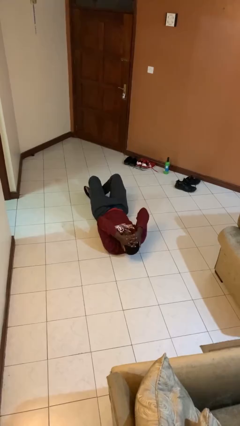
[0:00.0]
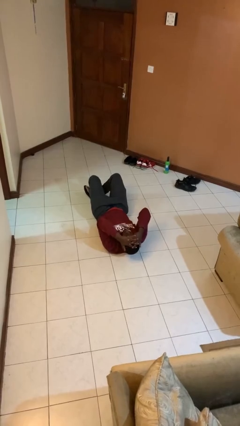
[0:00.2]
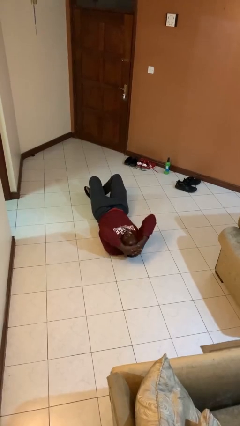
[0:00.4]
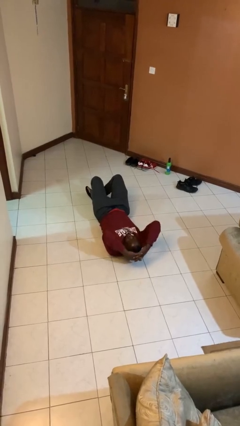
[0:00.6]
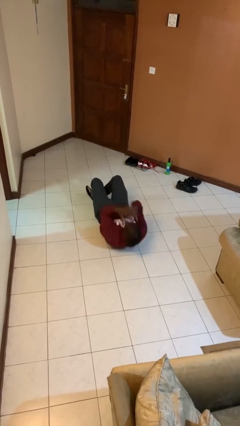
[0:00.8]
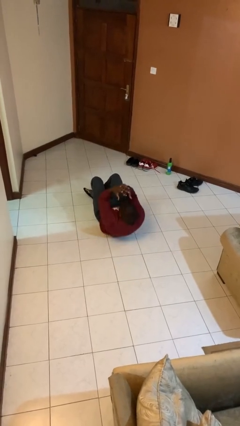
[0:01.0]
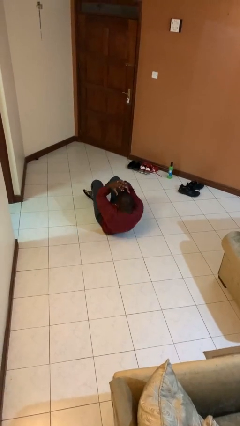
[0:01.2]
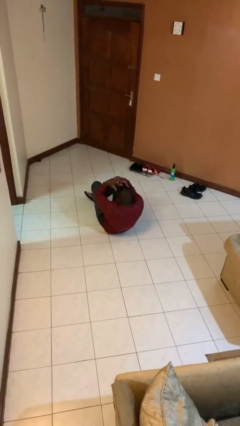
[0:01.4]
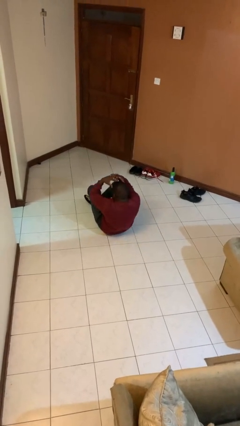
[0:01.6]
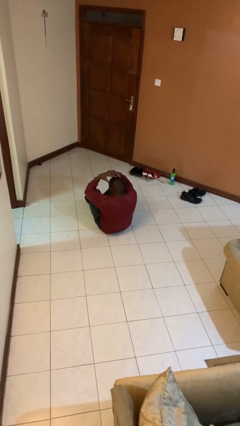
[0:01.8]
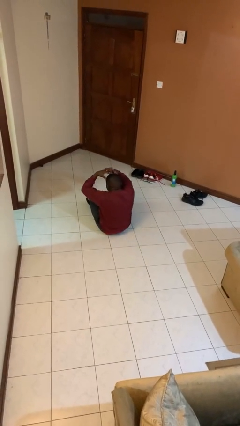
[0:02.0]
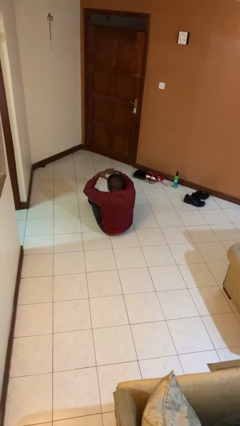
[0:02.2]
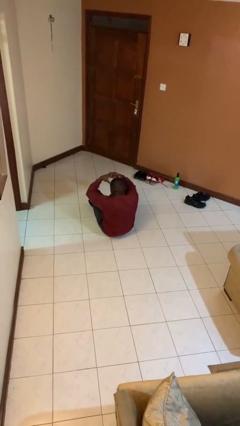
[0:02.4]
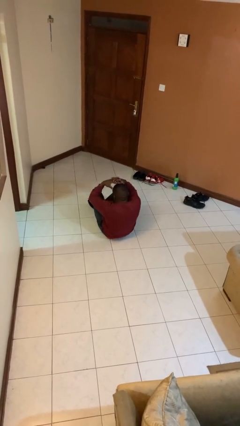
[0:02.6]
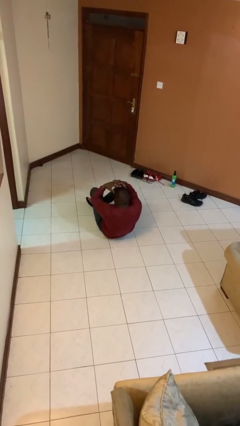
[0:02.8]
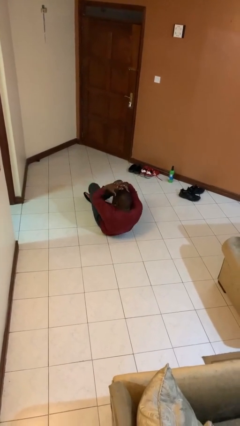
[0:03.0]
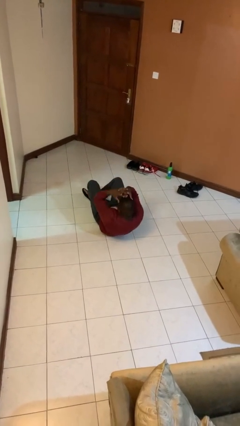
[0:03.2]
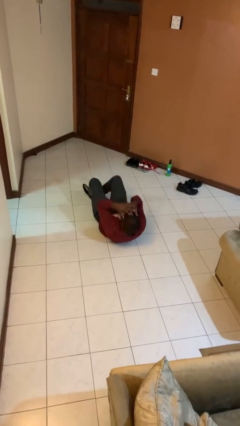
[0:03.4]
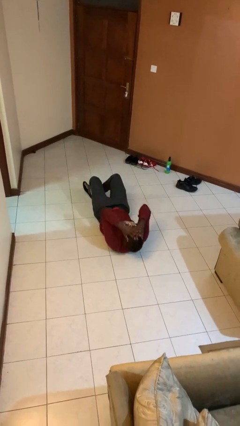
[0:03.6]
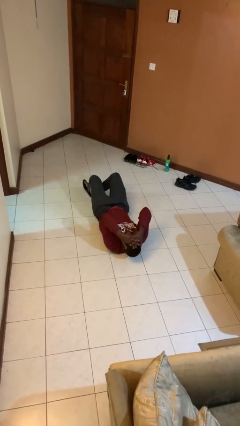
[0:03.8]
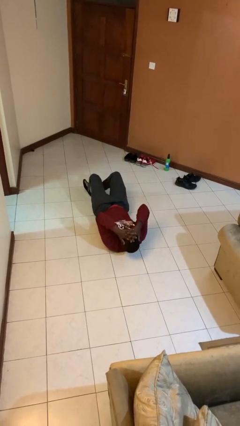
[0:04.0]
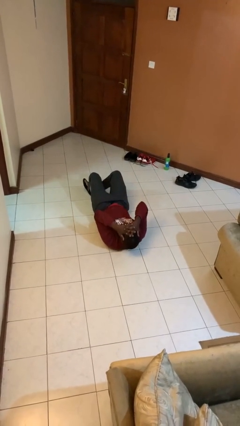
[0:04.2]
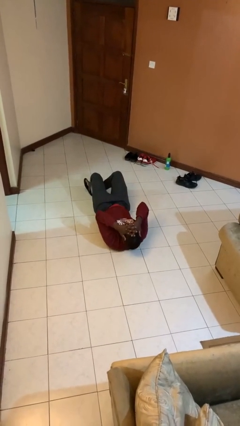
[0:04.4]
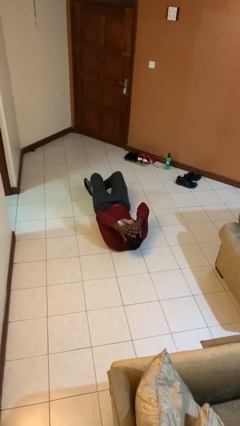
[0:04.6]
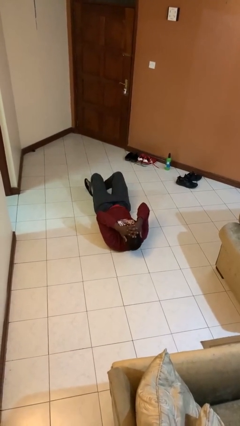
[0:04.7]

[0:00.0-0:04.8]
person exercises with situp

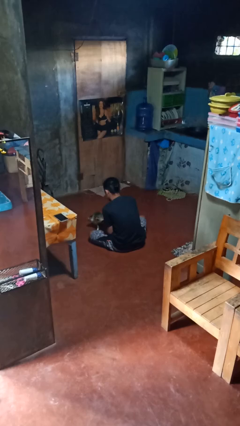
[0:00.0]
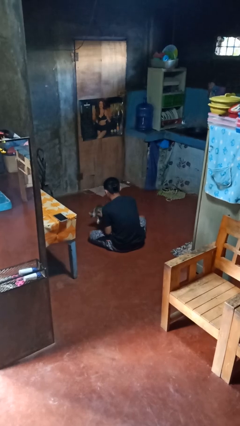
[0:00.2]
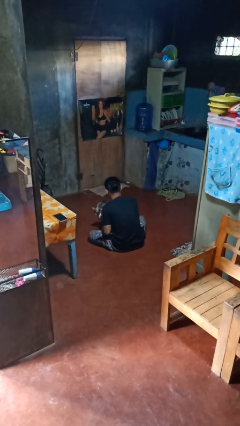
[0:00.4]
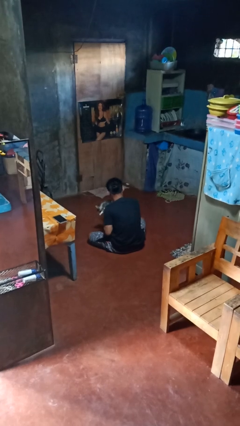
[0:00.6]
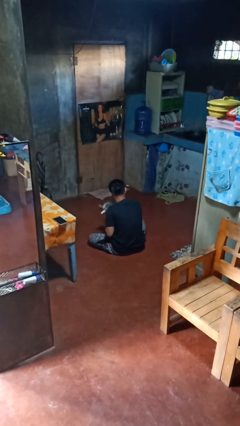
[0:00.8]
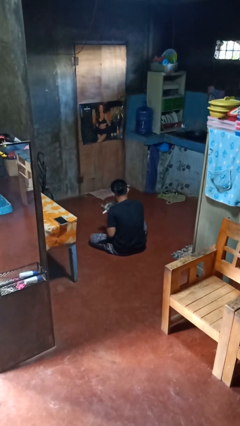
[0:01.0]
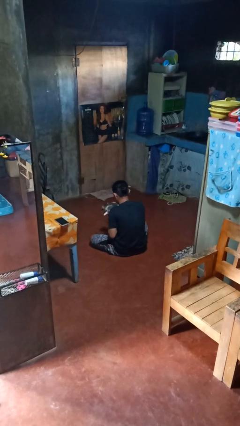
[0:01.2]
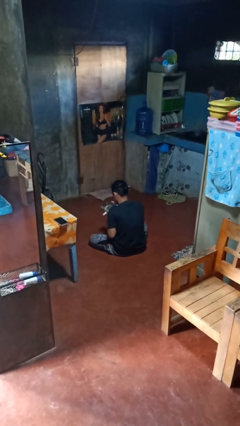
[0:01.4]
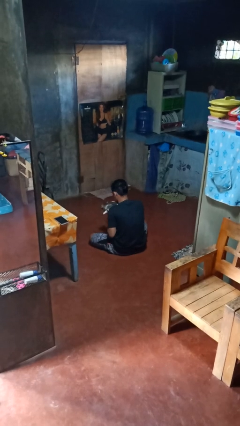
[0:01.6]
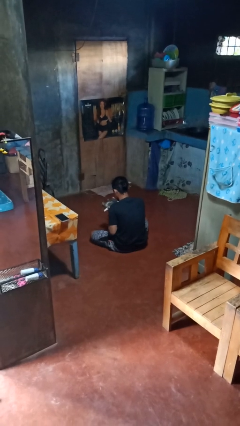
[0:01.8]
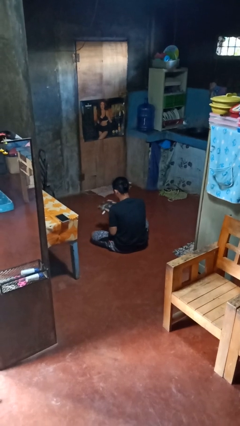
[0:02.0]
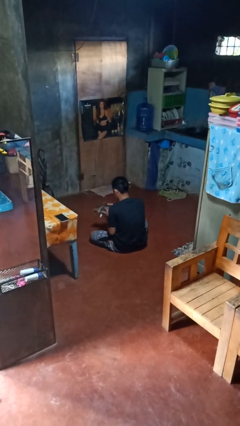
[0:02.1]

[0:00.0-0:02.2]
person hugs cat

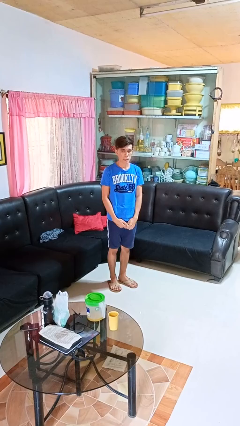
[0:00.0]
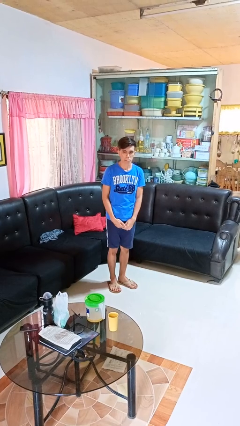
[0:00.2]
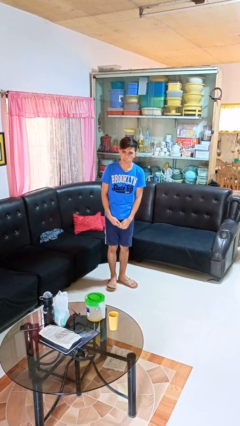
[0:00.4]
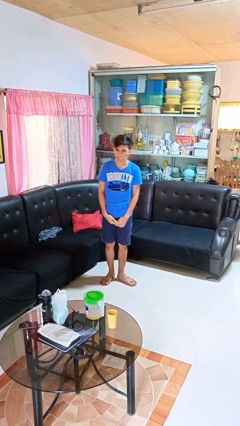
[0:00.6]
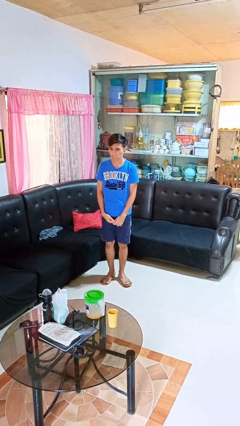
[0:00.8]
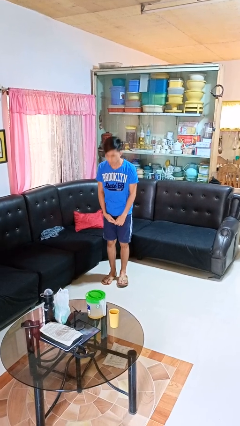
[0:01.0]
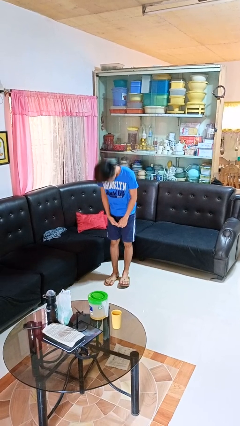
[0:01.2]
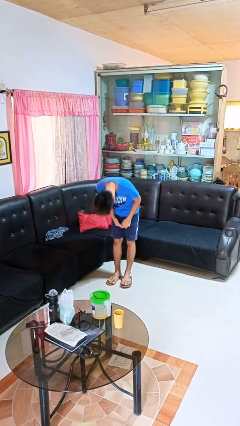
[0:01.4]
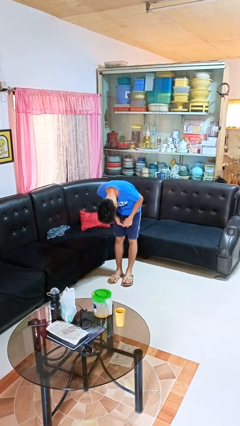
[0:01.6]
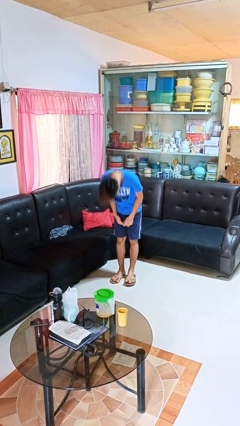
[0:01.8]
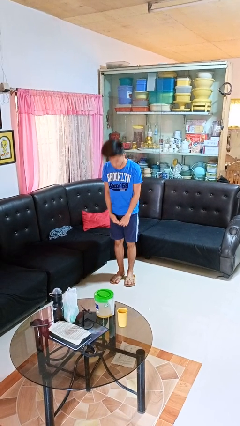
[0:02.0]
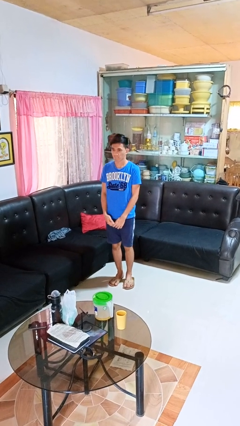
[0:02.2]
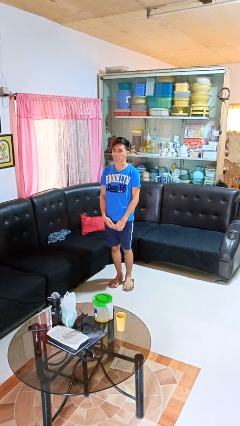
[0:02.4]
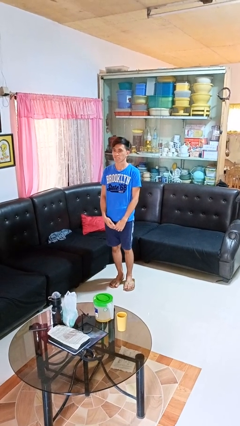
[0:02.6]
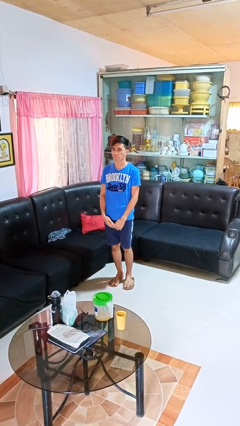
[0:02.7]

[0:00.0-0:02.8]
person bows

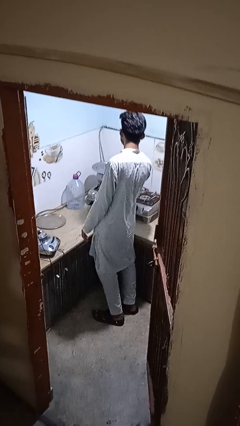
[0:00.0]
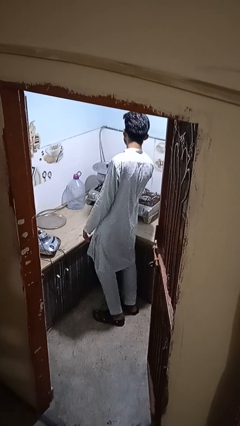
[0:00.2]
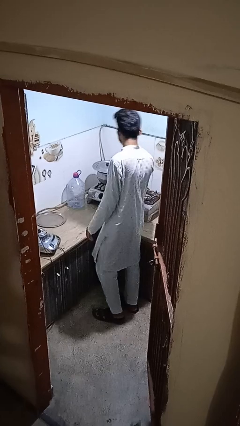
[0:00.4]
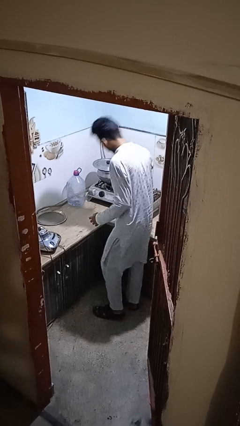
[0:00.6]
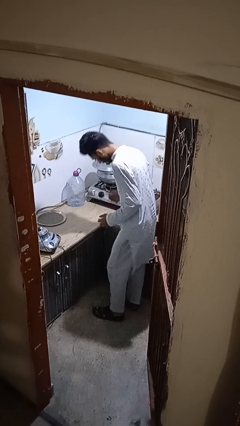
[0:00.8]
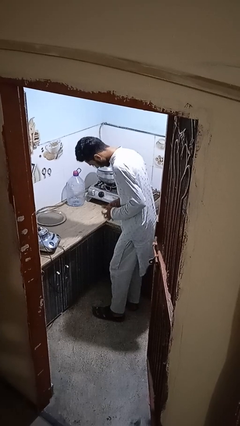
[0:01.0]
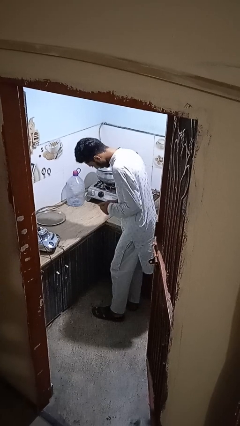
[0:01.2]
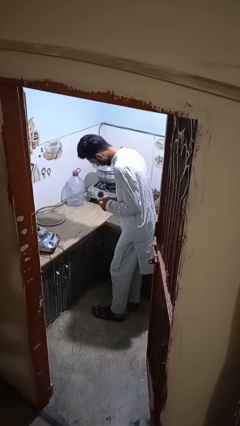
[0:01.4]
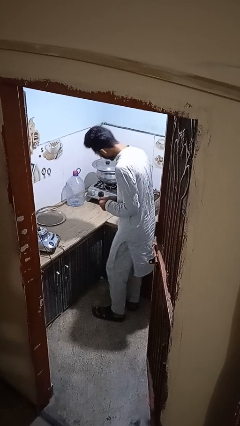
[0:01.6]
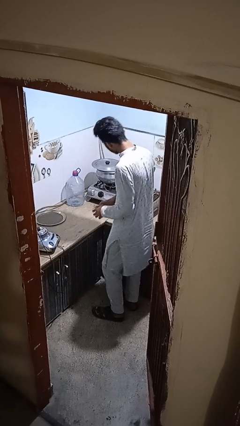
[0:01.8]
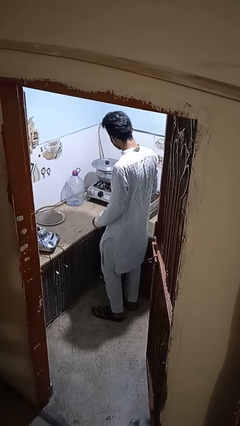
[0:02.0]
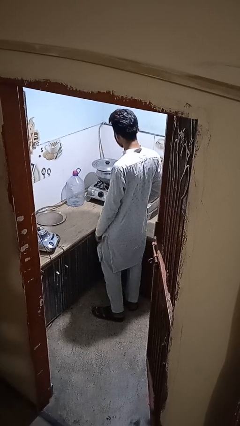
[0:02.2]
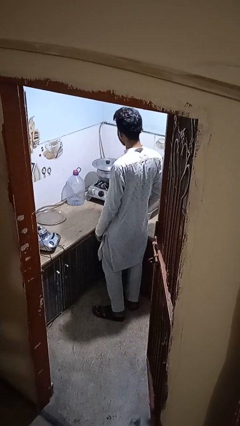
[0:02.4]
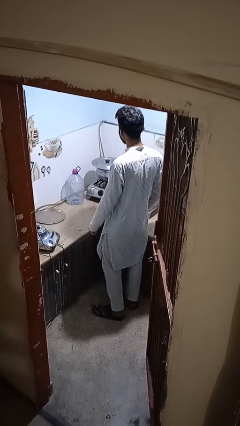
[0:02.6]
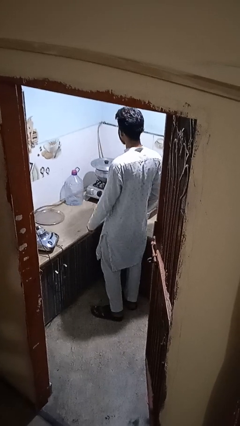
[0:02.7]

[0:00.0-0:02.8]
person burns hand

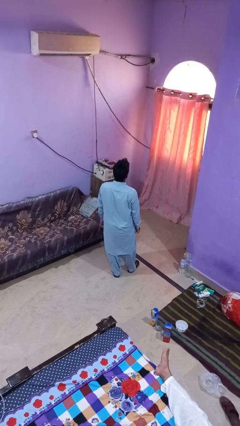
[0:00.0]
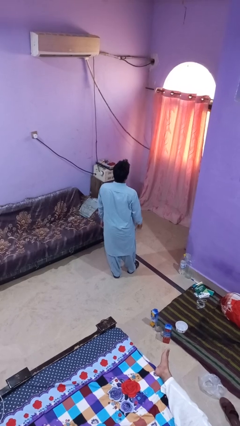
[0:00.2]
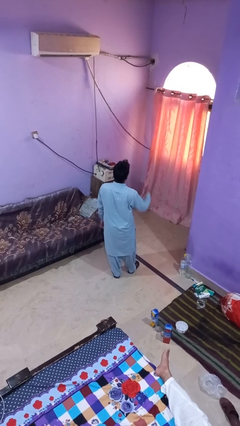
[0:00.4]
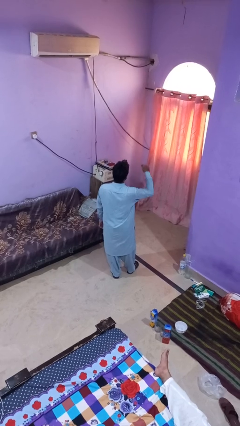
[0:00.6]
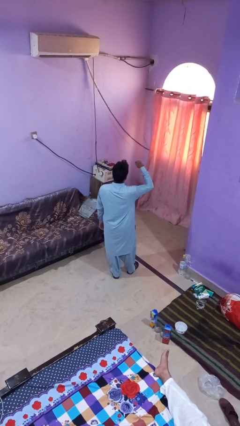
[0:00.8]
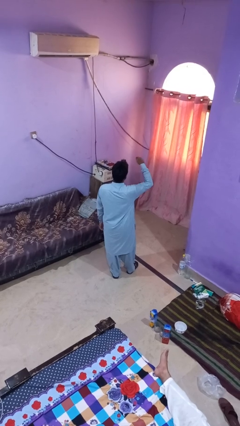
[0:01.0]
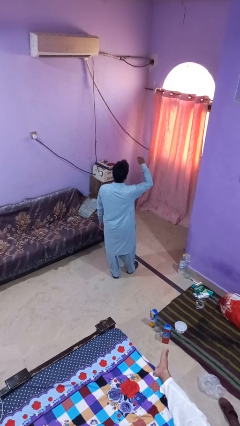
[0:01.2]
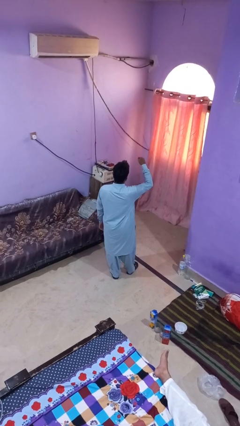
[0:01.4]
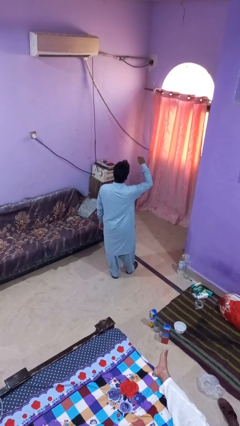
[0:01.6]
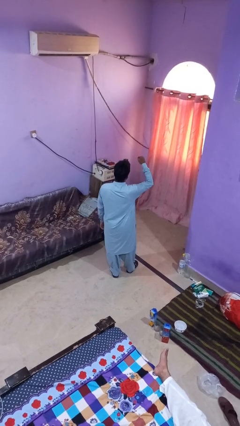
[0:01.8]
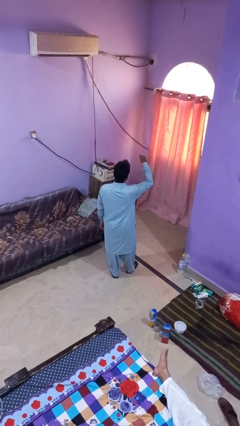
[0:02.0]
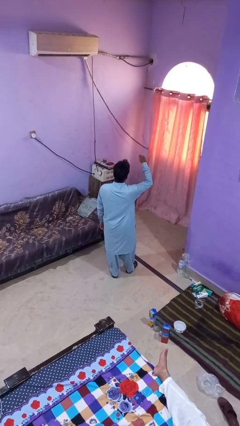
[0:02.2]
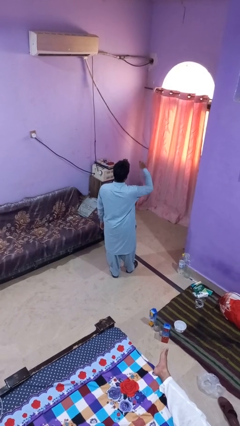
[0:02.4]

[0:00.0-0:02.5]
person gestures thumbs up

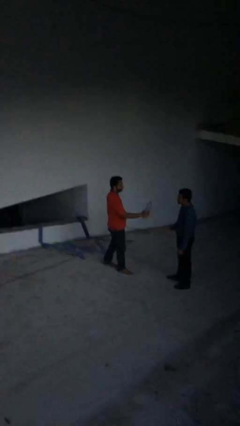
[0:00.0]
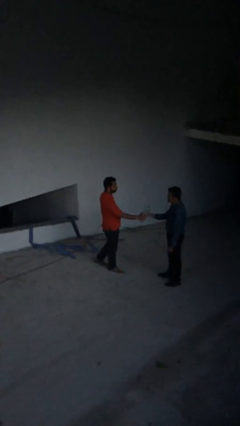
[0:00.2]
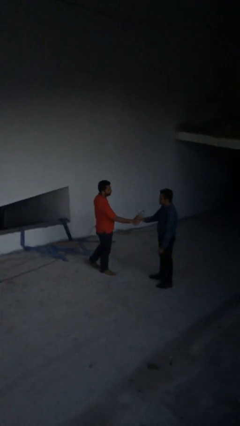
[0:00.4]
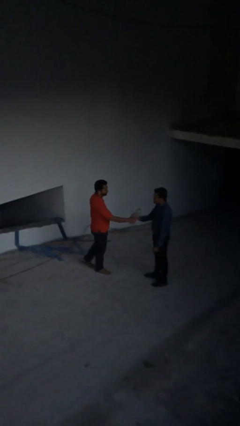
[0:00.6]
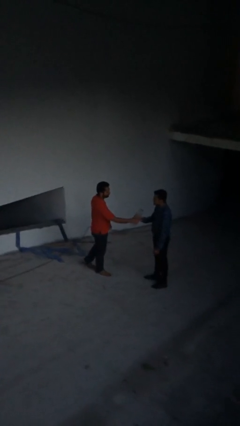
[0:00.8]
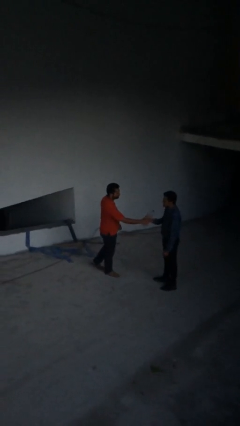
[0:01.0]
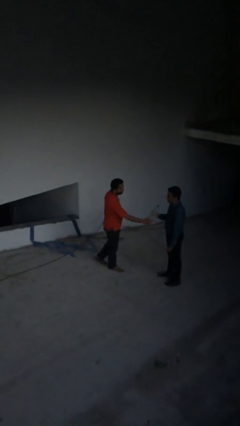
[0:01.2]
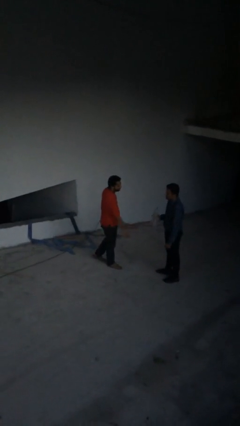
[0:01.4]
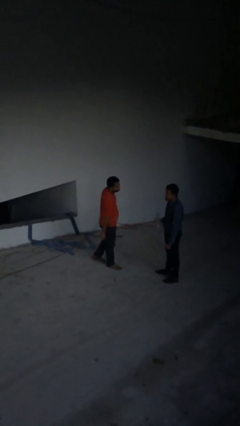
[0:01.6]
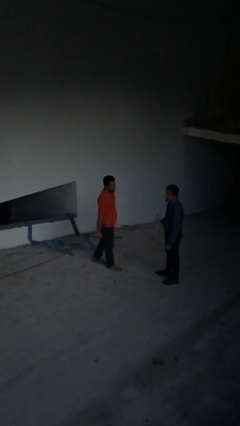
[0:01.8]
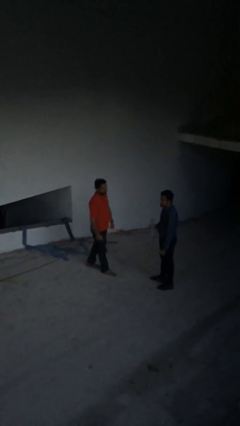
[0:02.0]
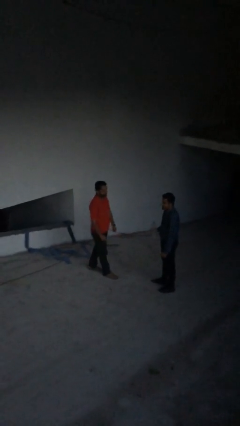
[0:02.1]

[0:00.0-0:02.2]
person transfers object to person
